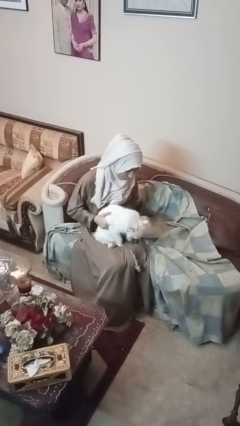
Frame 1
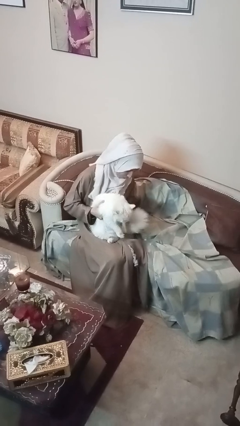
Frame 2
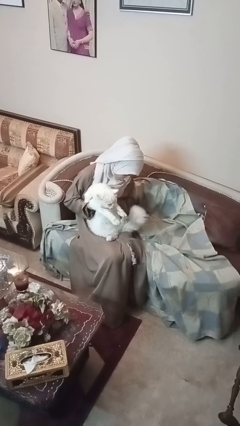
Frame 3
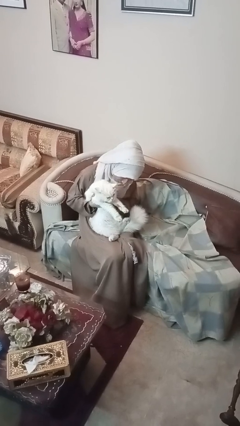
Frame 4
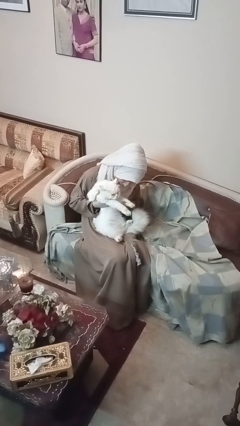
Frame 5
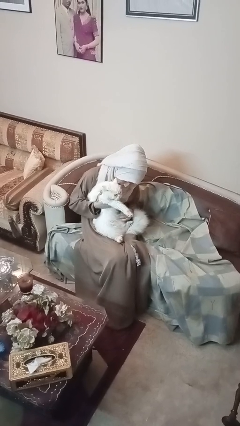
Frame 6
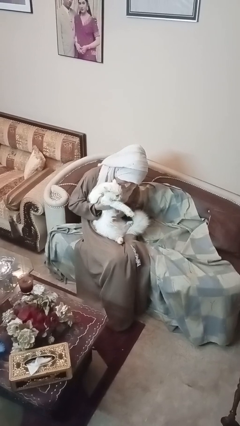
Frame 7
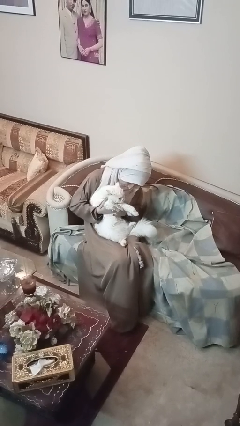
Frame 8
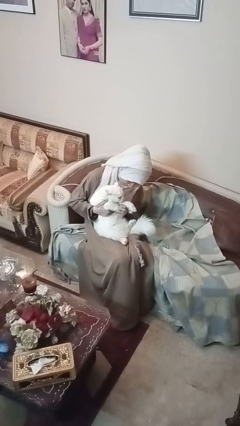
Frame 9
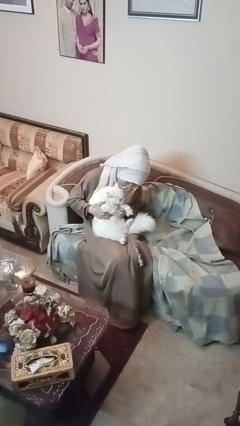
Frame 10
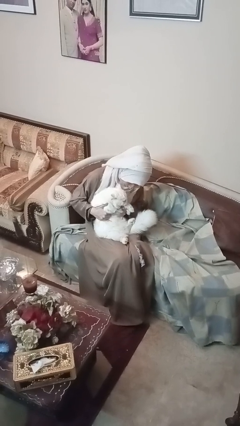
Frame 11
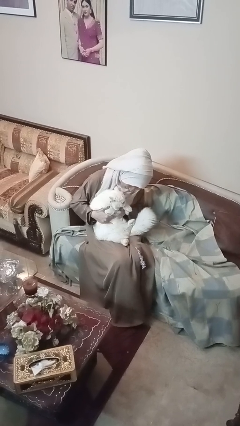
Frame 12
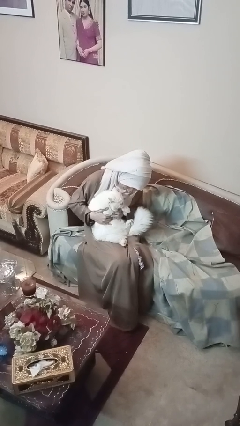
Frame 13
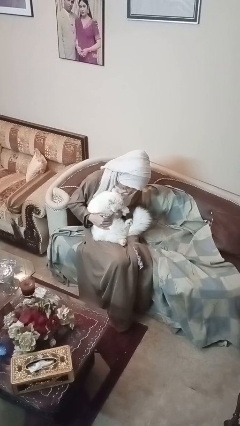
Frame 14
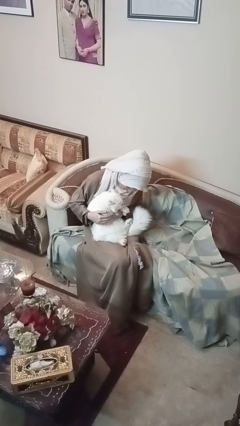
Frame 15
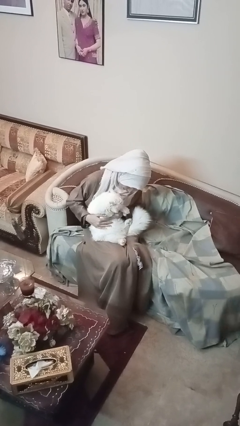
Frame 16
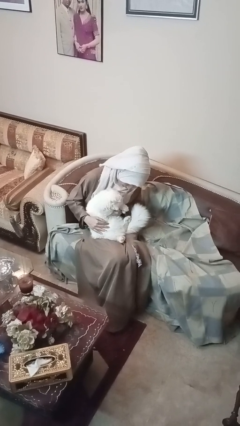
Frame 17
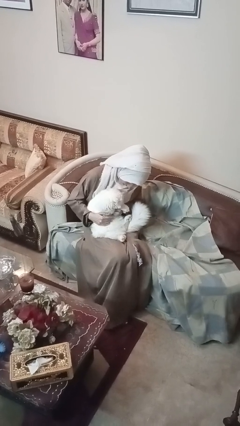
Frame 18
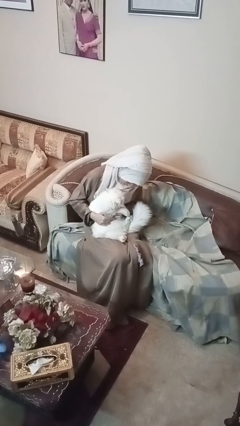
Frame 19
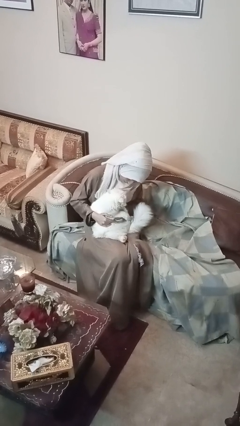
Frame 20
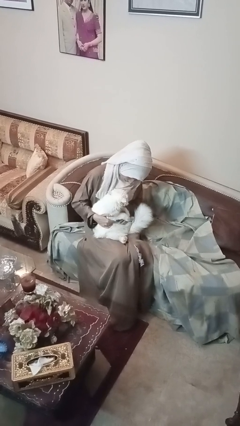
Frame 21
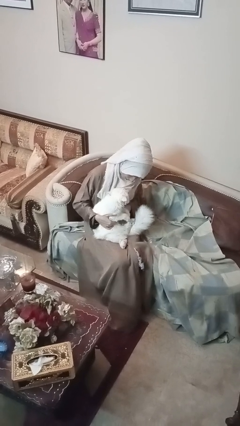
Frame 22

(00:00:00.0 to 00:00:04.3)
person hugs cat

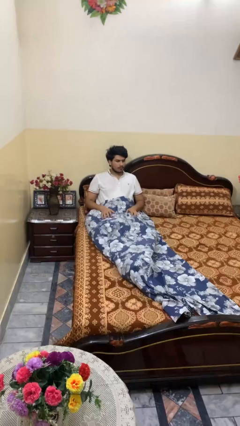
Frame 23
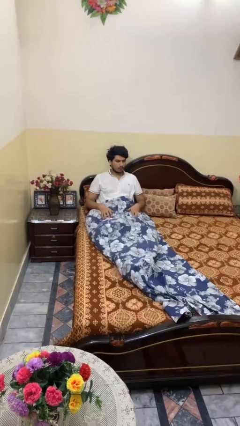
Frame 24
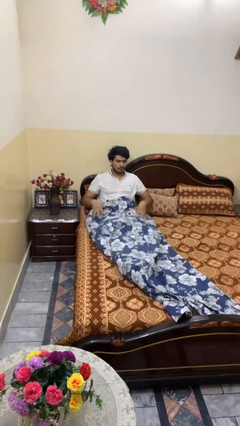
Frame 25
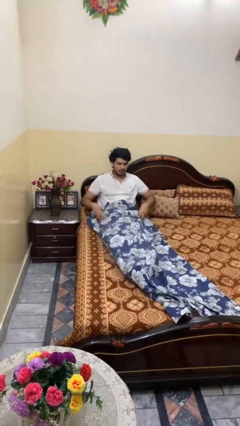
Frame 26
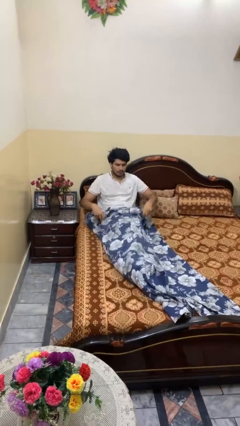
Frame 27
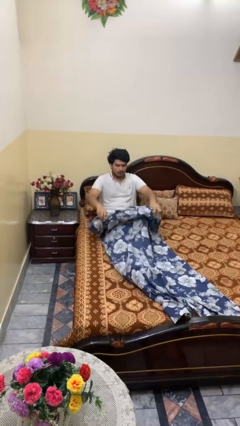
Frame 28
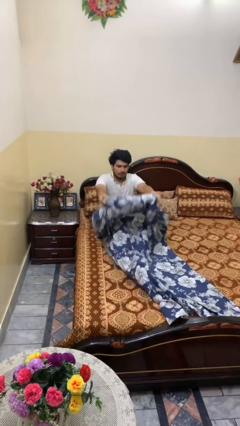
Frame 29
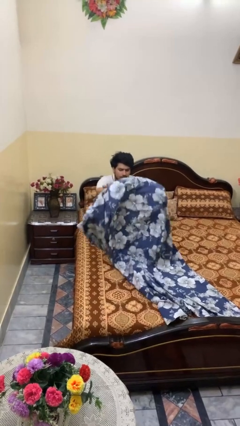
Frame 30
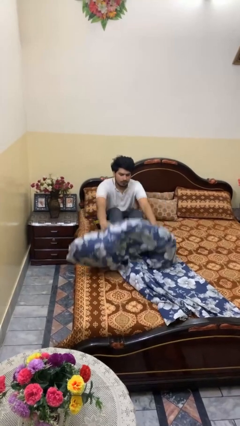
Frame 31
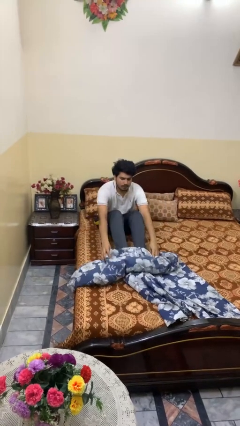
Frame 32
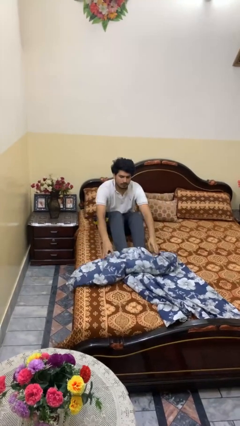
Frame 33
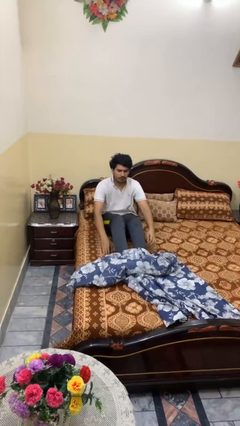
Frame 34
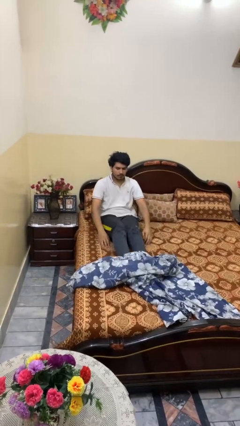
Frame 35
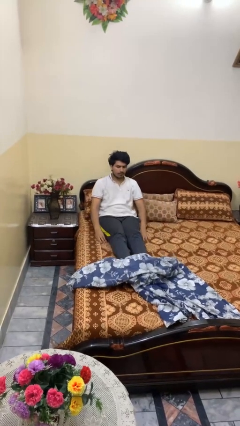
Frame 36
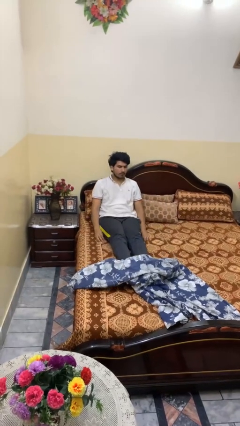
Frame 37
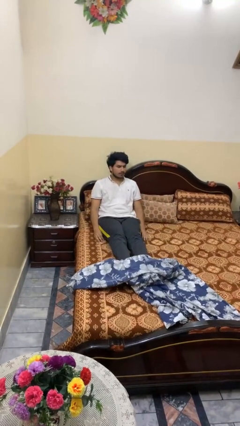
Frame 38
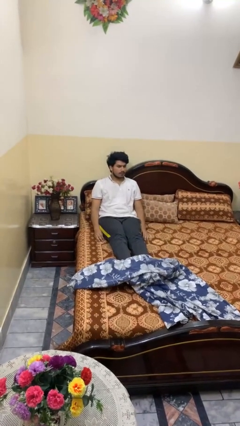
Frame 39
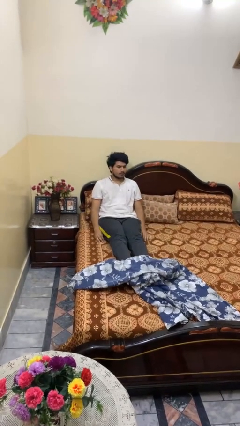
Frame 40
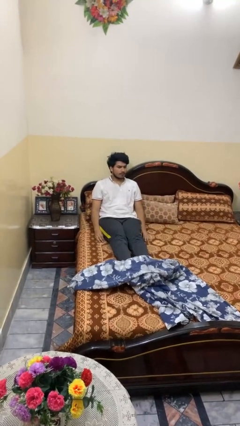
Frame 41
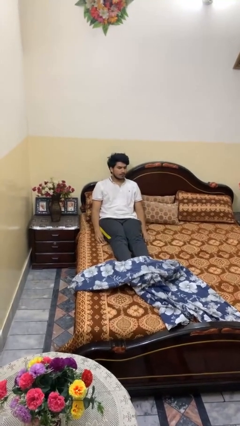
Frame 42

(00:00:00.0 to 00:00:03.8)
person uncovers with bedsheets

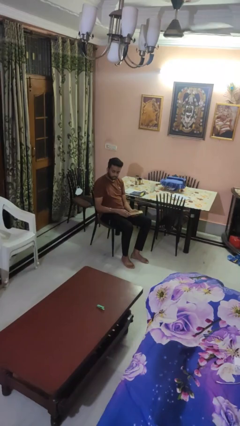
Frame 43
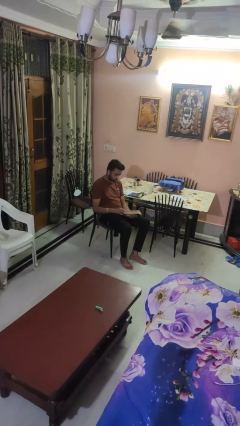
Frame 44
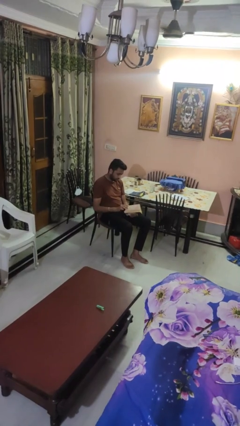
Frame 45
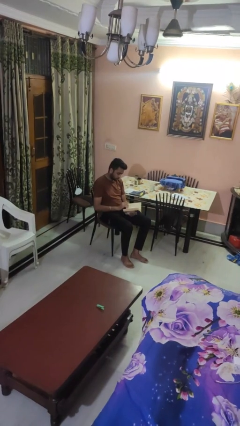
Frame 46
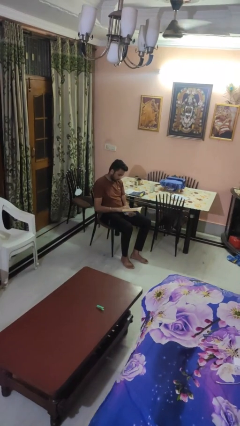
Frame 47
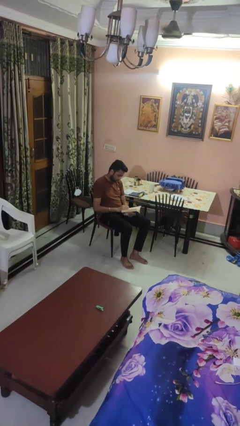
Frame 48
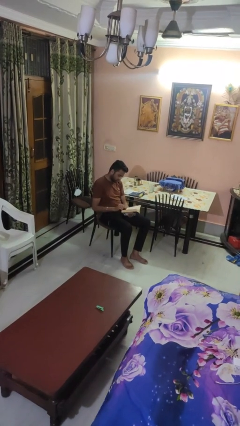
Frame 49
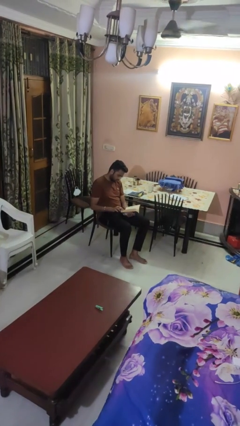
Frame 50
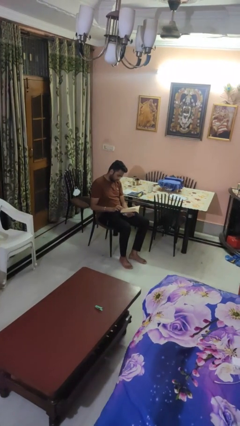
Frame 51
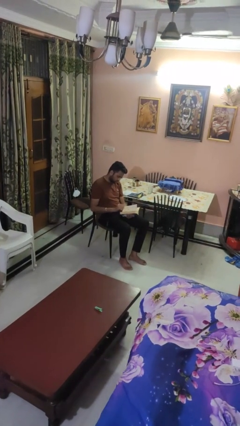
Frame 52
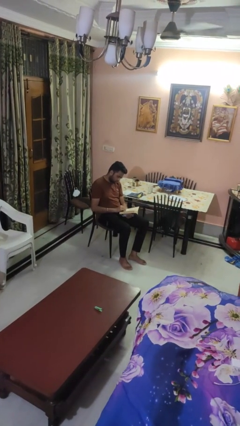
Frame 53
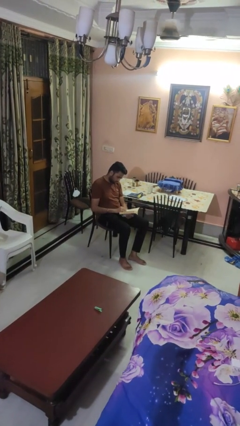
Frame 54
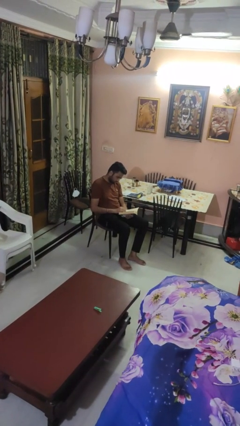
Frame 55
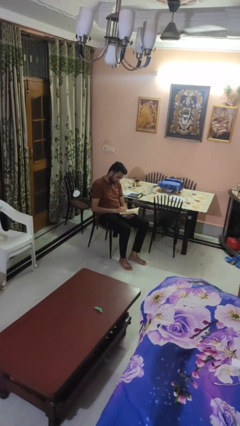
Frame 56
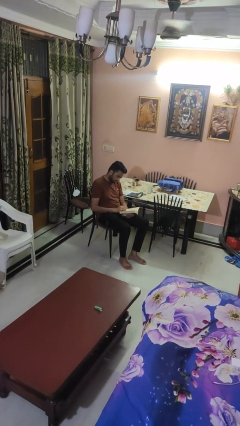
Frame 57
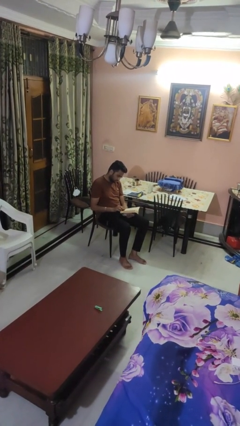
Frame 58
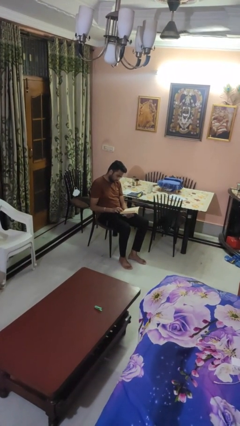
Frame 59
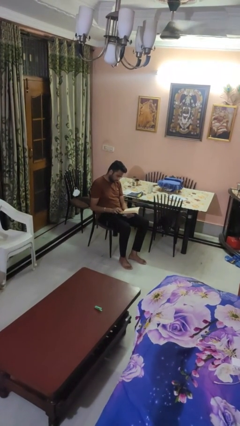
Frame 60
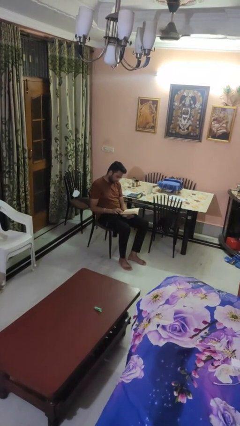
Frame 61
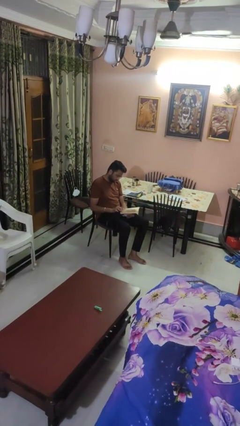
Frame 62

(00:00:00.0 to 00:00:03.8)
person reads book

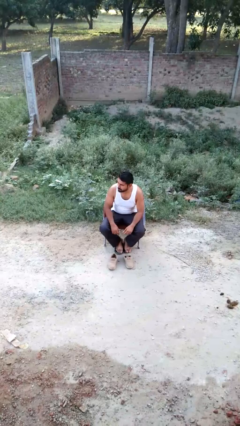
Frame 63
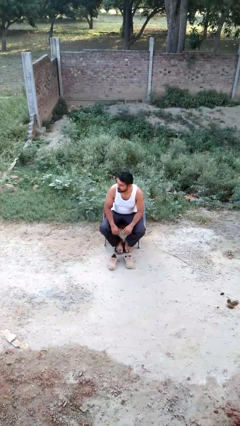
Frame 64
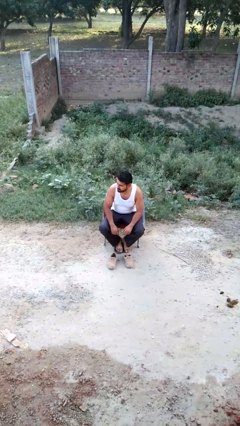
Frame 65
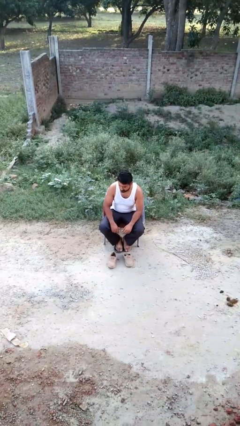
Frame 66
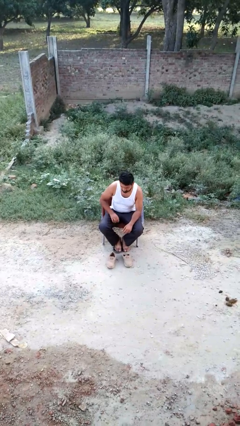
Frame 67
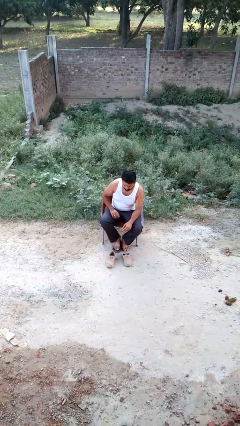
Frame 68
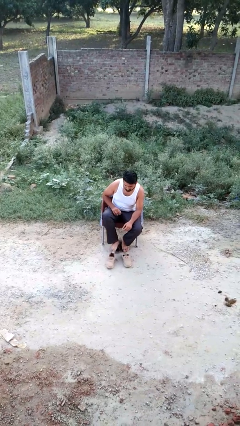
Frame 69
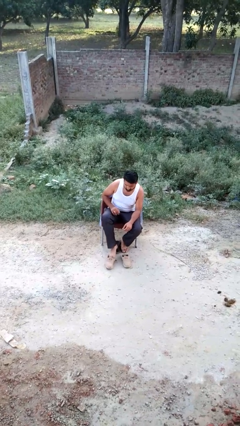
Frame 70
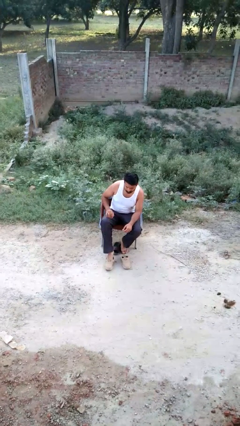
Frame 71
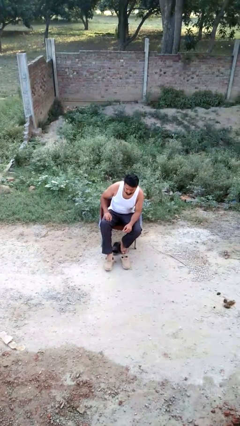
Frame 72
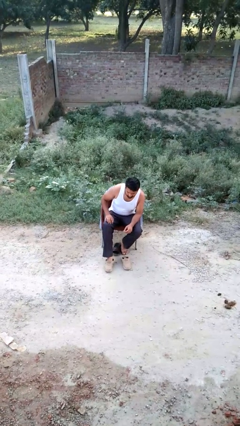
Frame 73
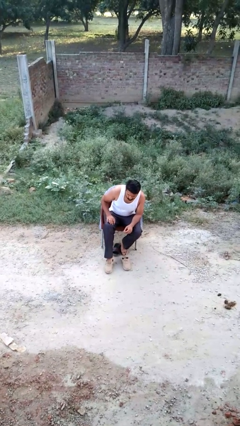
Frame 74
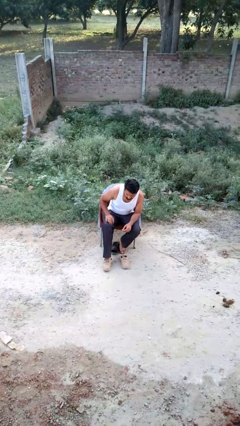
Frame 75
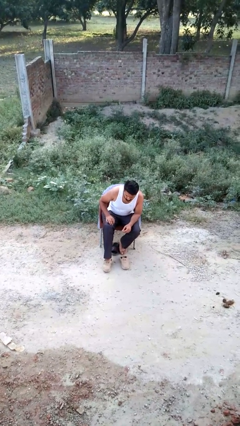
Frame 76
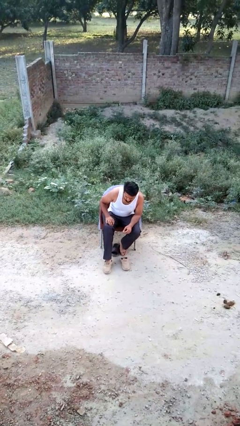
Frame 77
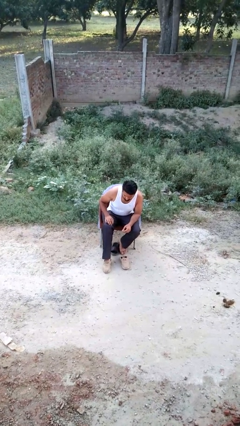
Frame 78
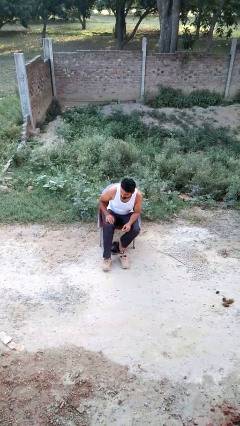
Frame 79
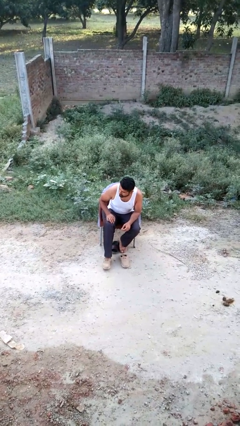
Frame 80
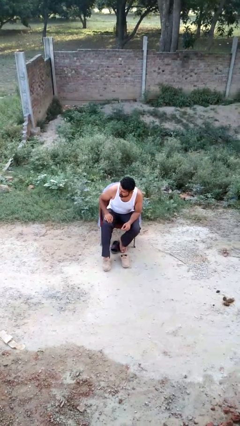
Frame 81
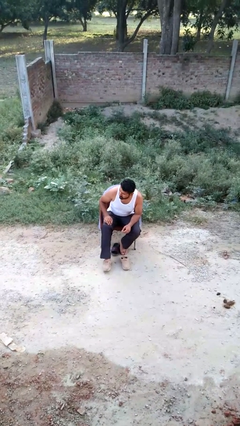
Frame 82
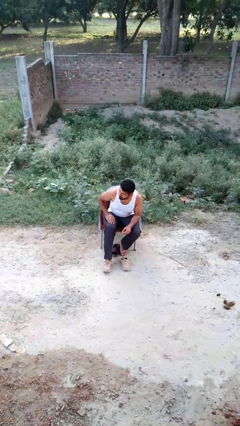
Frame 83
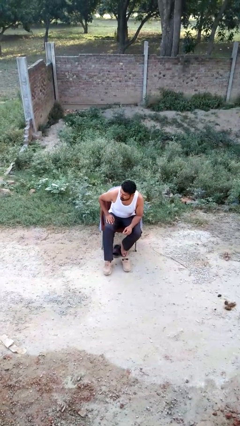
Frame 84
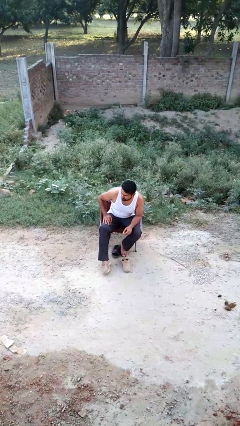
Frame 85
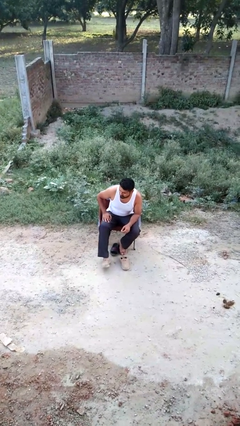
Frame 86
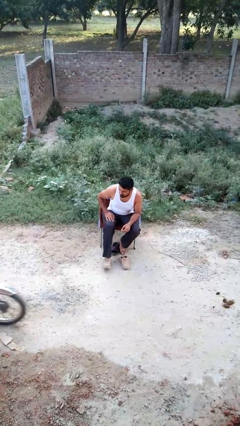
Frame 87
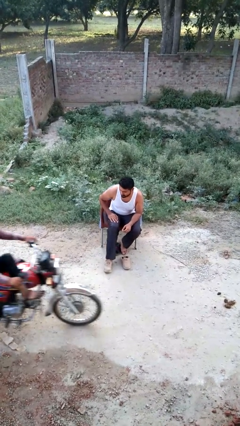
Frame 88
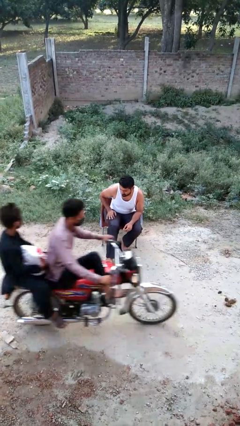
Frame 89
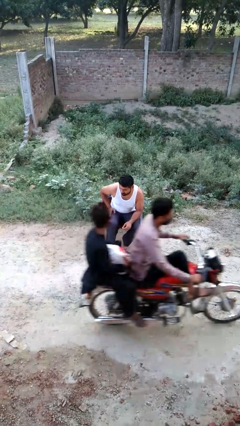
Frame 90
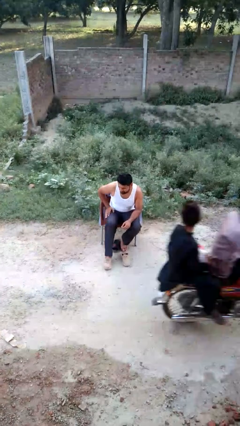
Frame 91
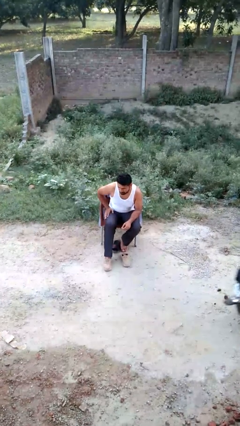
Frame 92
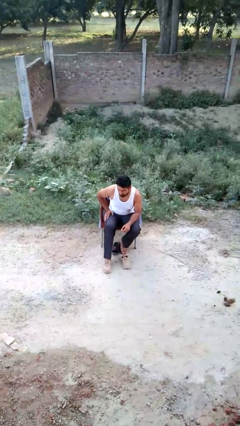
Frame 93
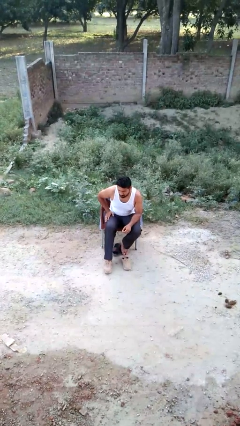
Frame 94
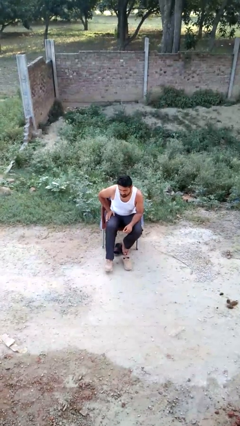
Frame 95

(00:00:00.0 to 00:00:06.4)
person puts on shoes
